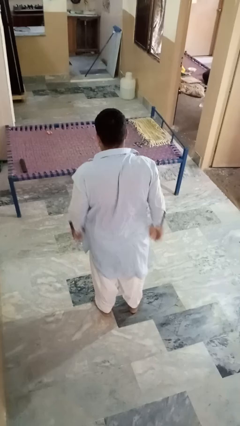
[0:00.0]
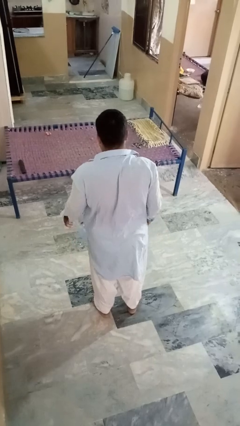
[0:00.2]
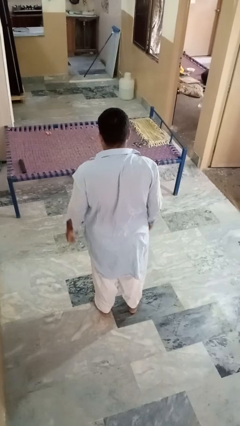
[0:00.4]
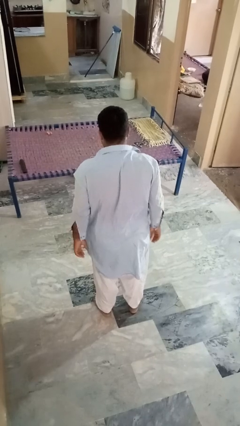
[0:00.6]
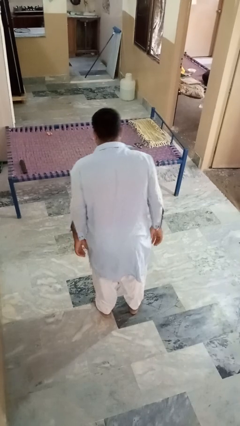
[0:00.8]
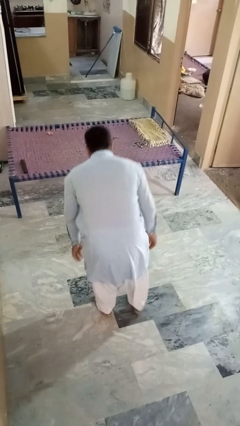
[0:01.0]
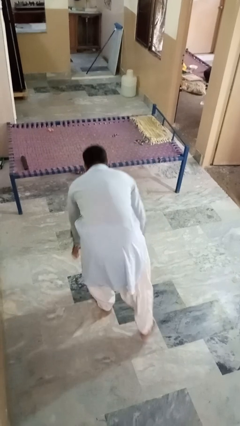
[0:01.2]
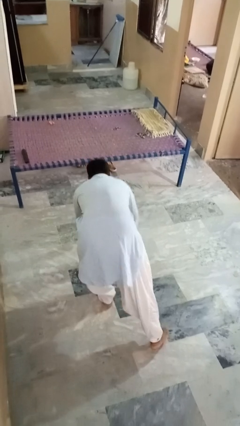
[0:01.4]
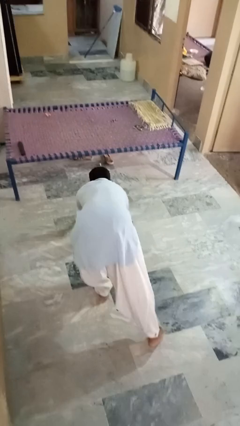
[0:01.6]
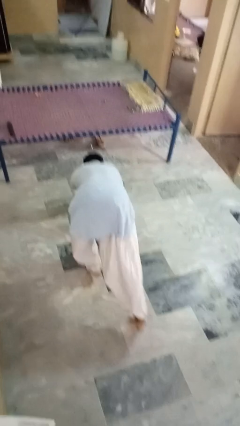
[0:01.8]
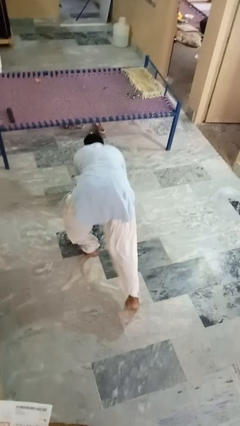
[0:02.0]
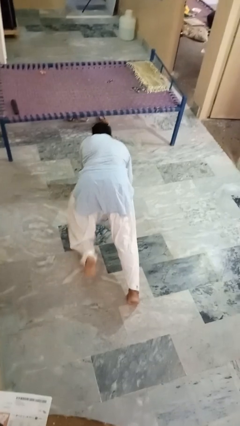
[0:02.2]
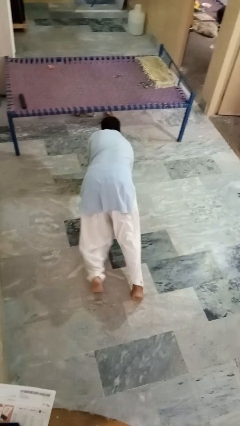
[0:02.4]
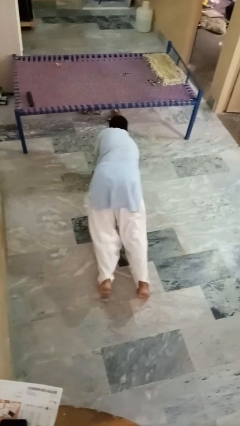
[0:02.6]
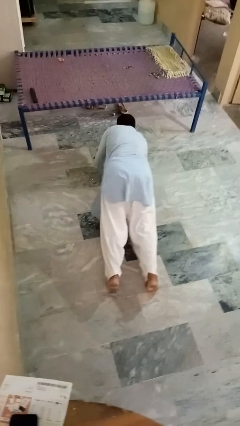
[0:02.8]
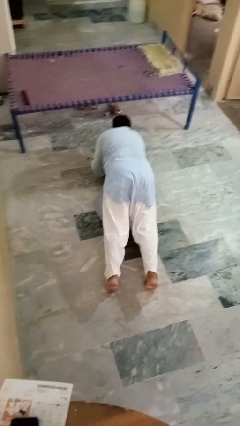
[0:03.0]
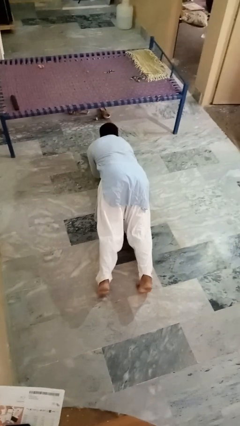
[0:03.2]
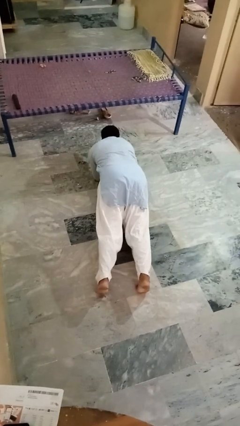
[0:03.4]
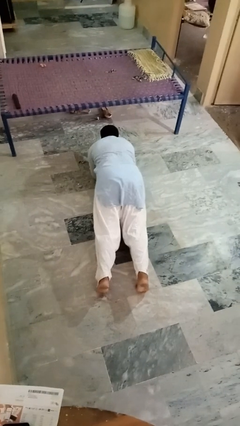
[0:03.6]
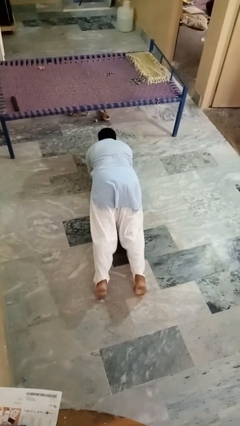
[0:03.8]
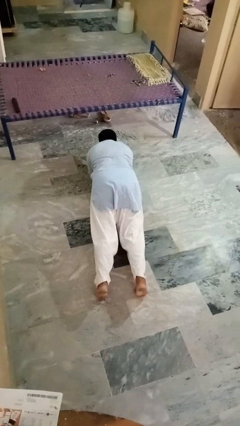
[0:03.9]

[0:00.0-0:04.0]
person exercises with plank

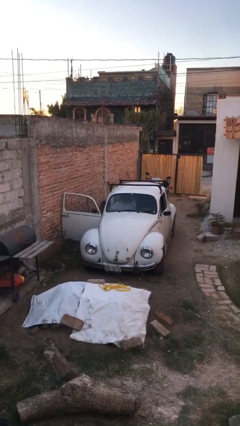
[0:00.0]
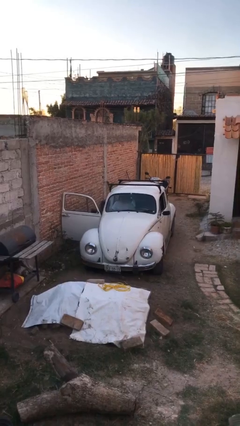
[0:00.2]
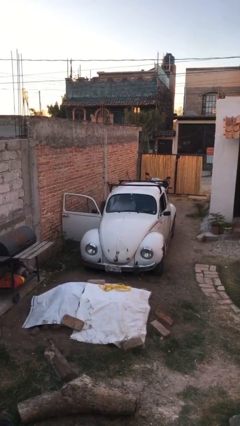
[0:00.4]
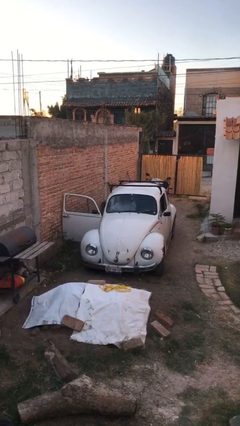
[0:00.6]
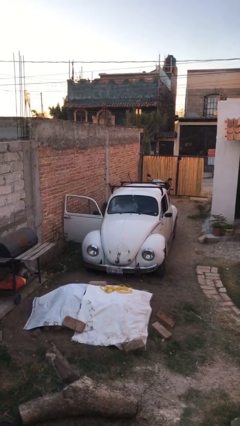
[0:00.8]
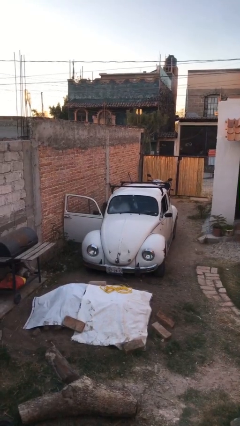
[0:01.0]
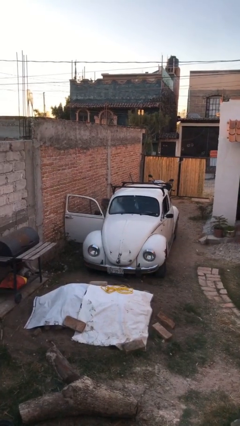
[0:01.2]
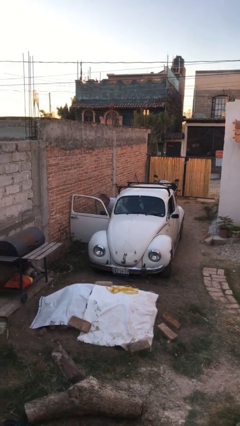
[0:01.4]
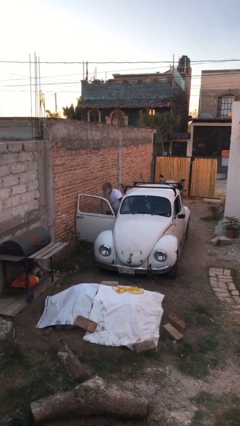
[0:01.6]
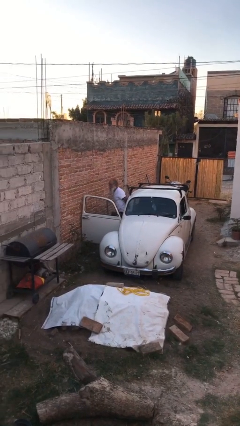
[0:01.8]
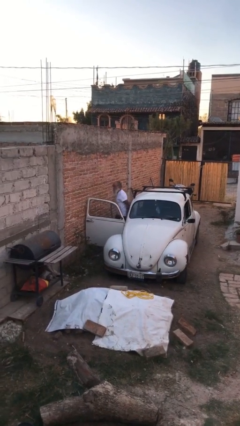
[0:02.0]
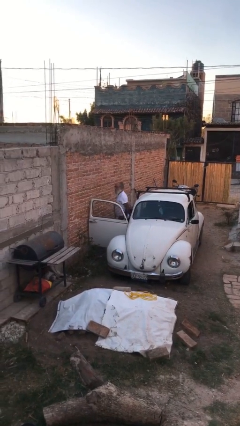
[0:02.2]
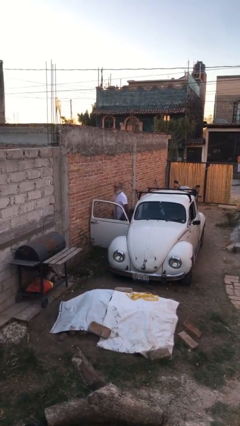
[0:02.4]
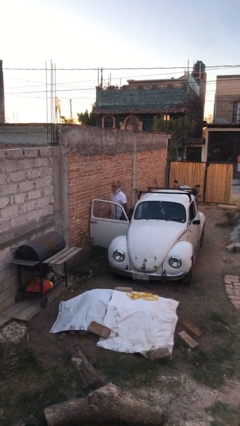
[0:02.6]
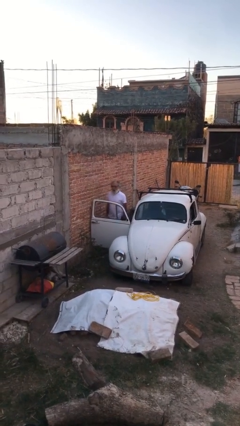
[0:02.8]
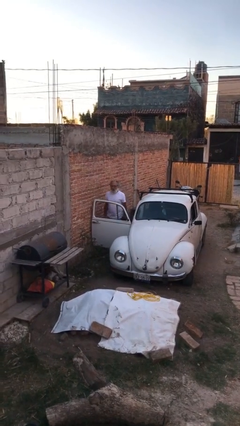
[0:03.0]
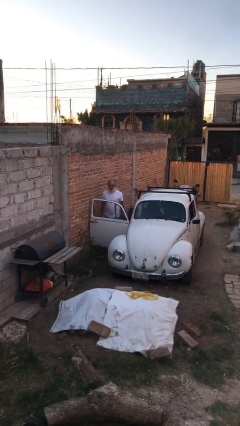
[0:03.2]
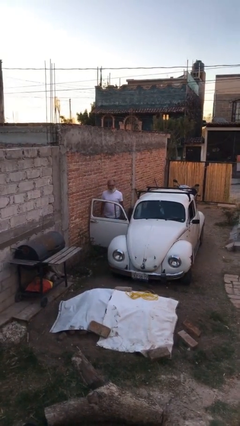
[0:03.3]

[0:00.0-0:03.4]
person exits car

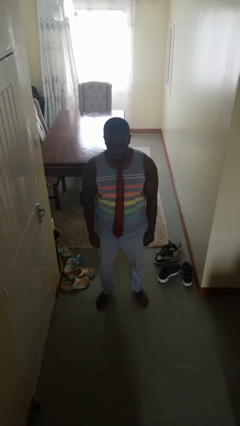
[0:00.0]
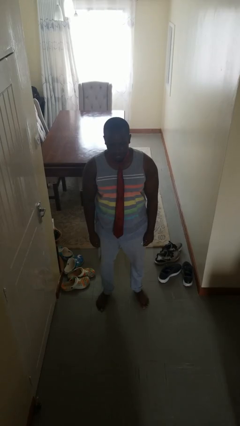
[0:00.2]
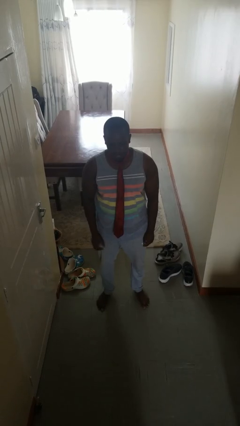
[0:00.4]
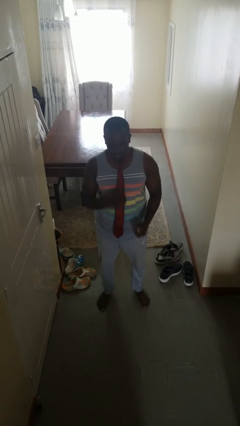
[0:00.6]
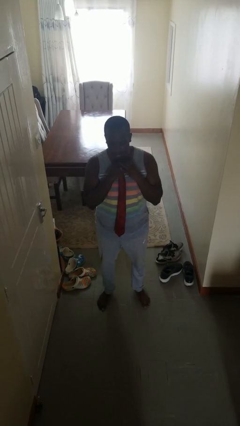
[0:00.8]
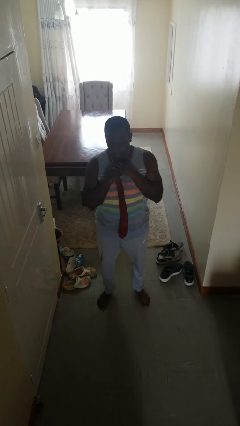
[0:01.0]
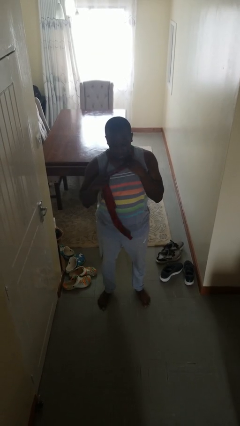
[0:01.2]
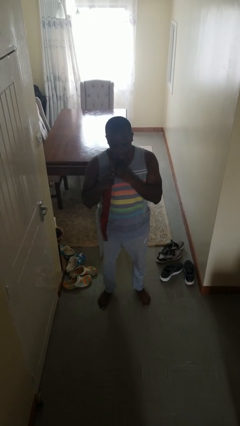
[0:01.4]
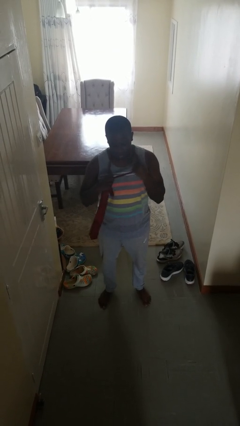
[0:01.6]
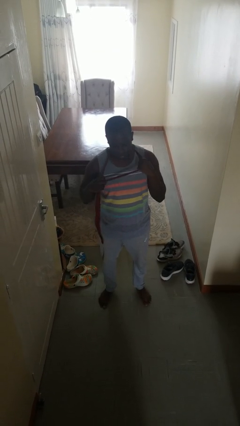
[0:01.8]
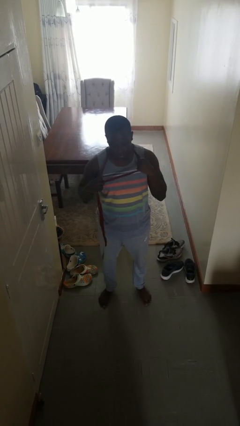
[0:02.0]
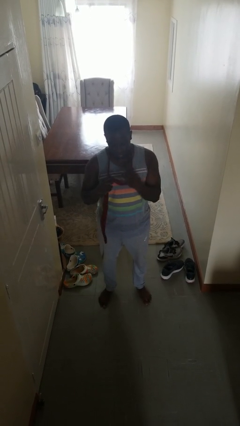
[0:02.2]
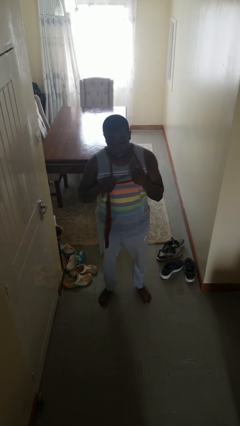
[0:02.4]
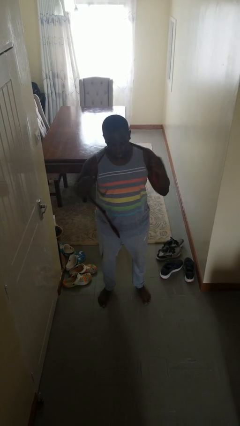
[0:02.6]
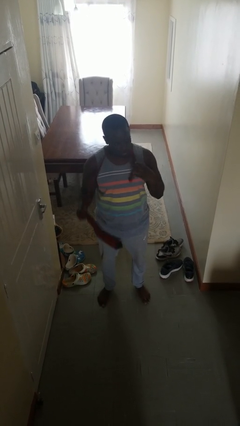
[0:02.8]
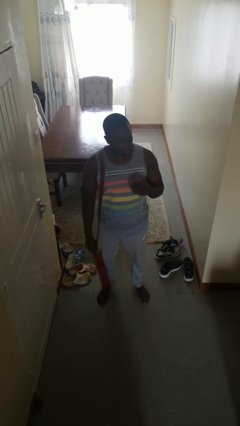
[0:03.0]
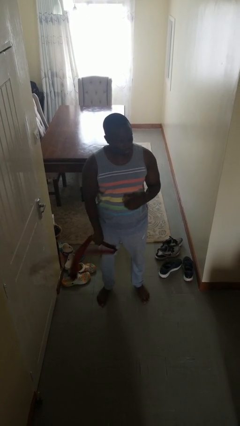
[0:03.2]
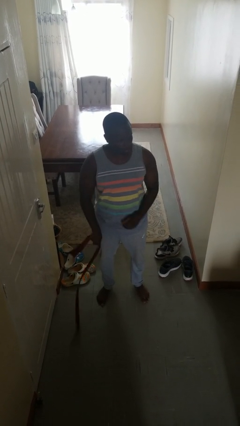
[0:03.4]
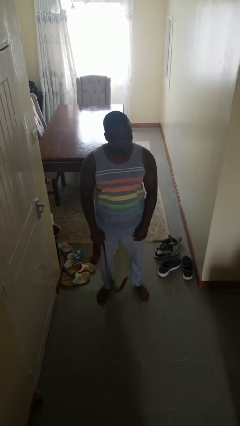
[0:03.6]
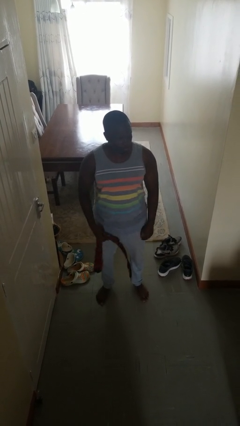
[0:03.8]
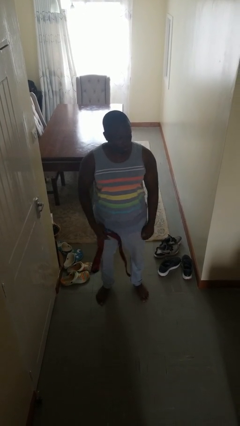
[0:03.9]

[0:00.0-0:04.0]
person takes off necktie

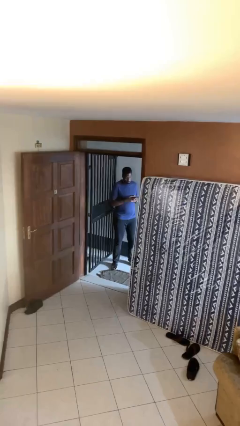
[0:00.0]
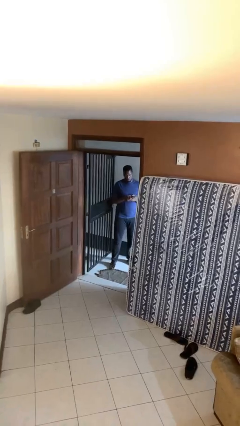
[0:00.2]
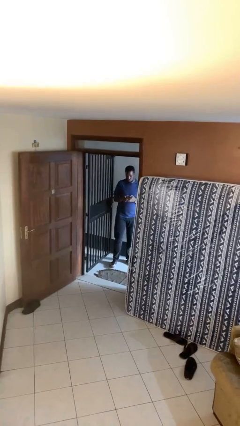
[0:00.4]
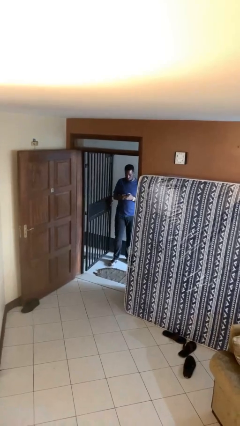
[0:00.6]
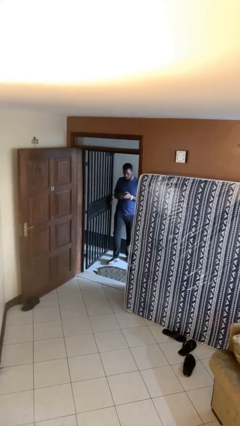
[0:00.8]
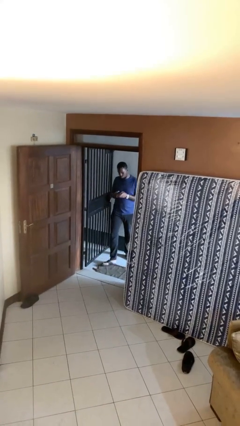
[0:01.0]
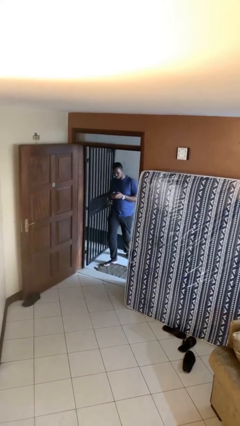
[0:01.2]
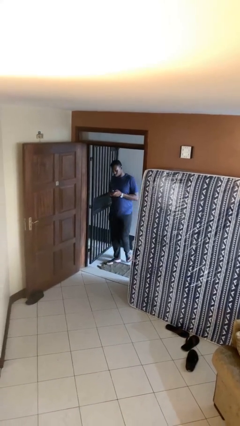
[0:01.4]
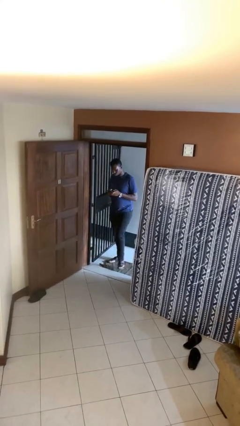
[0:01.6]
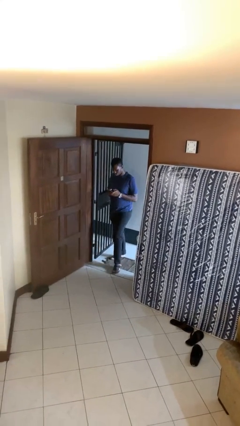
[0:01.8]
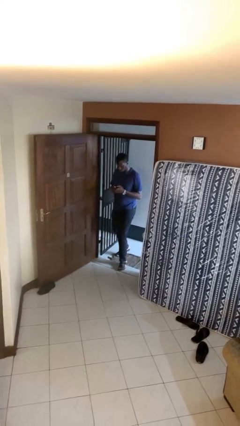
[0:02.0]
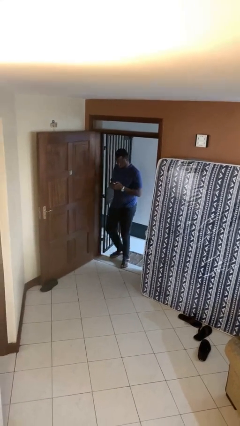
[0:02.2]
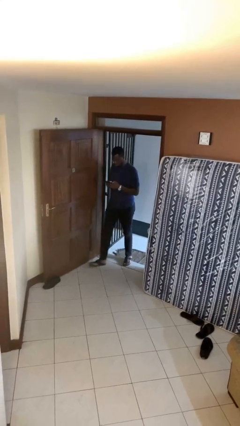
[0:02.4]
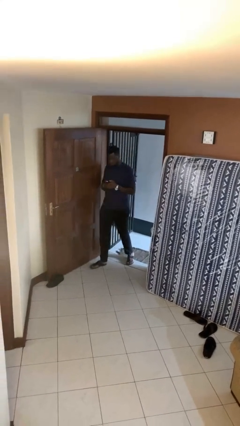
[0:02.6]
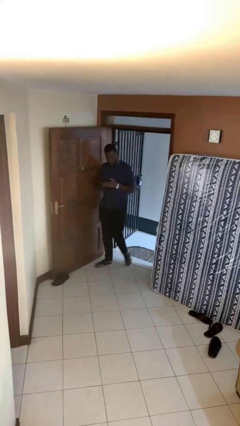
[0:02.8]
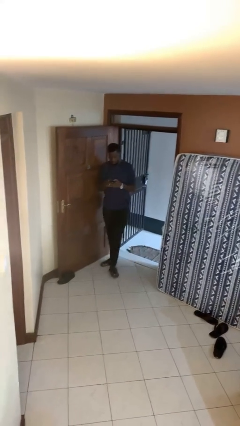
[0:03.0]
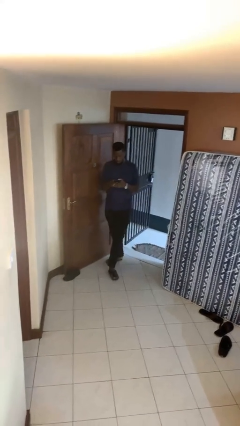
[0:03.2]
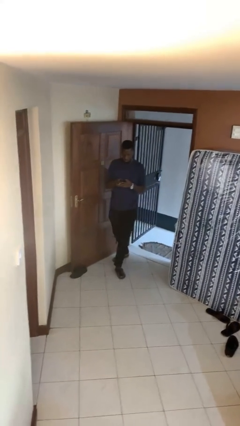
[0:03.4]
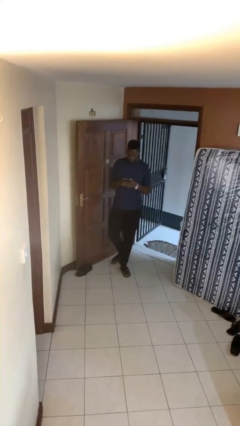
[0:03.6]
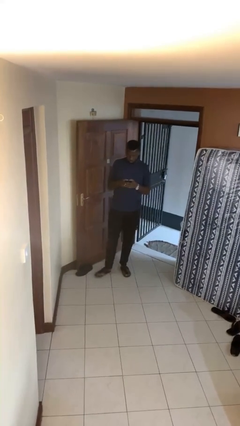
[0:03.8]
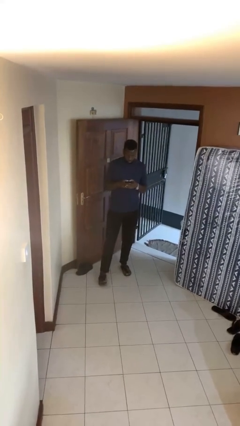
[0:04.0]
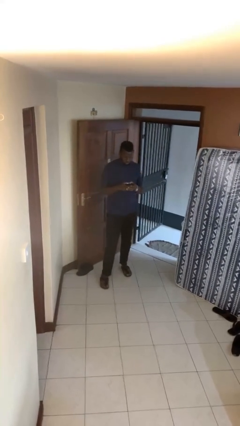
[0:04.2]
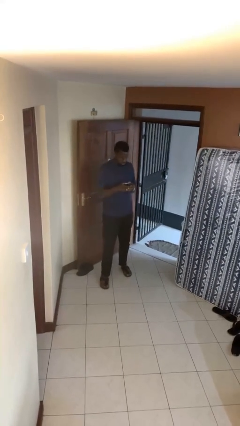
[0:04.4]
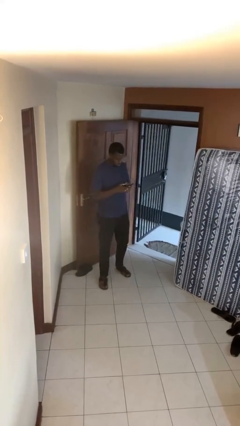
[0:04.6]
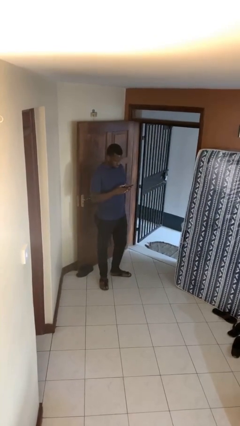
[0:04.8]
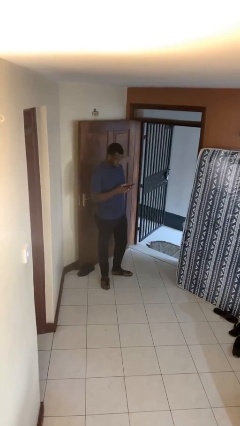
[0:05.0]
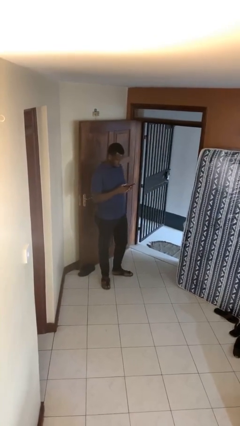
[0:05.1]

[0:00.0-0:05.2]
person enters scene through structure

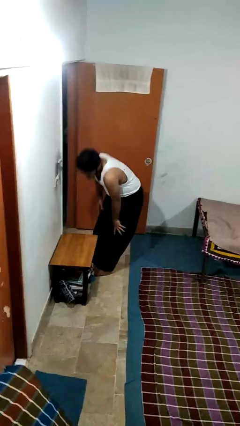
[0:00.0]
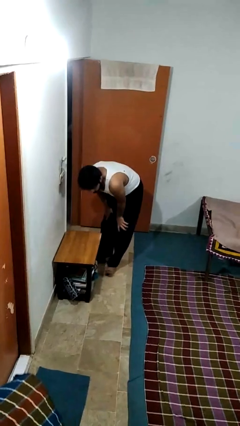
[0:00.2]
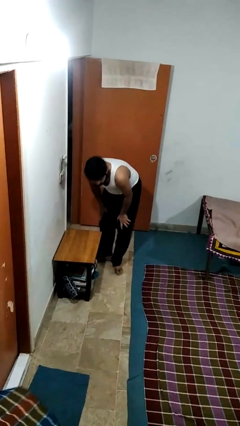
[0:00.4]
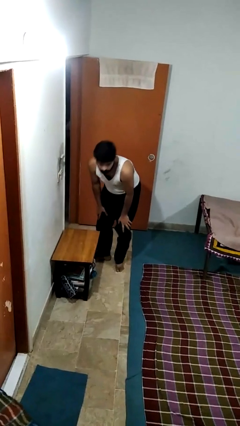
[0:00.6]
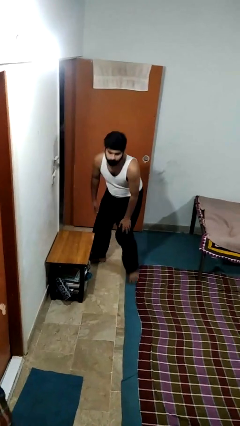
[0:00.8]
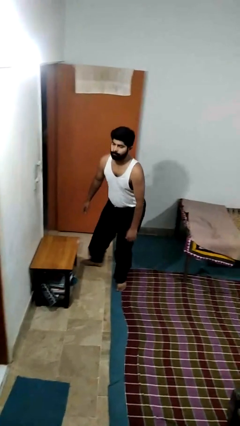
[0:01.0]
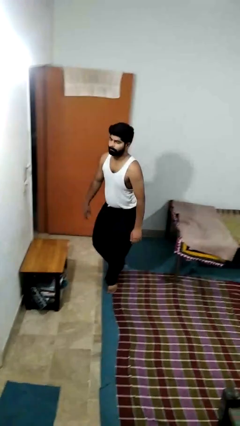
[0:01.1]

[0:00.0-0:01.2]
person bumps into table
